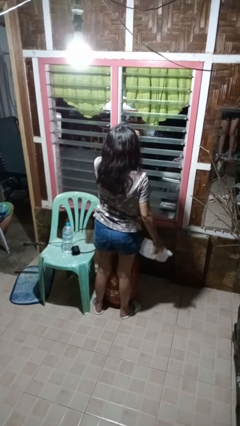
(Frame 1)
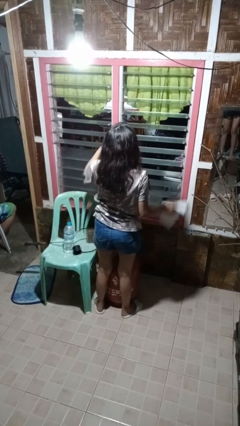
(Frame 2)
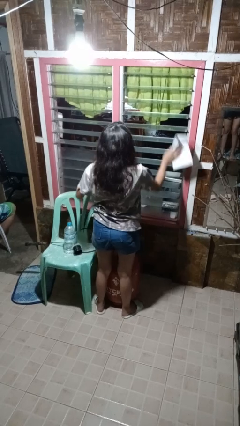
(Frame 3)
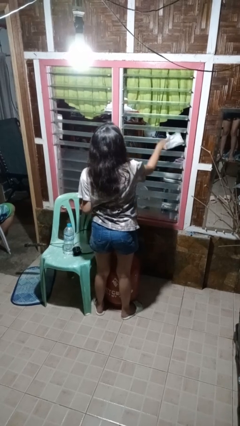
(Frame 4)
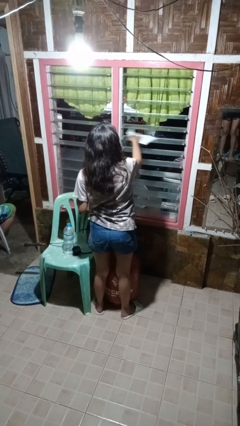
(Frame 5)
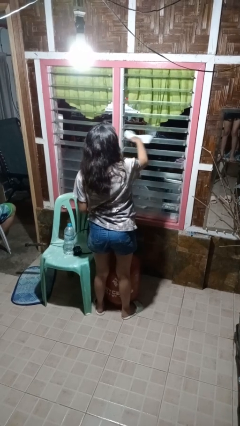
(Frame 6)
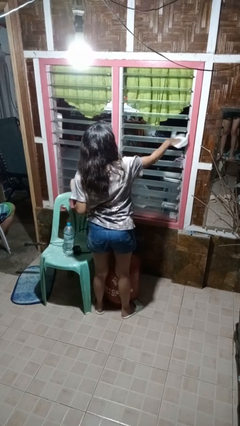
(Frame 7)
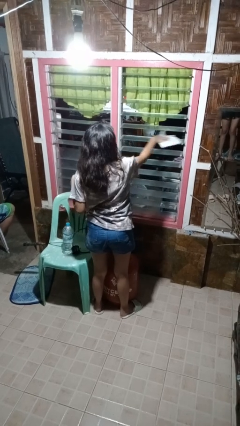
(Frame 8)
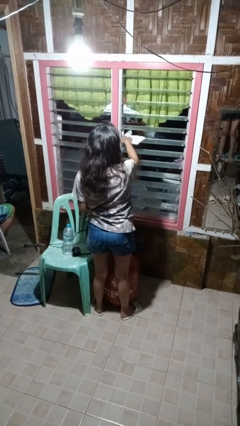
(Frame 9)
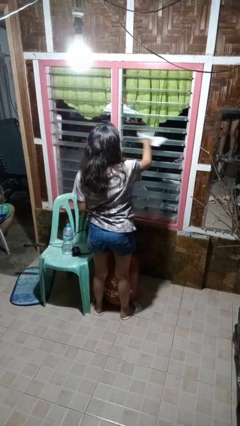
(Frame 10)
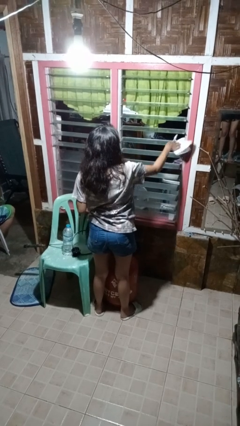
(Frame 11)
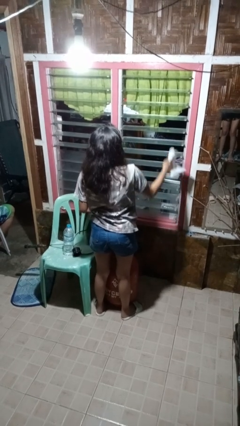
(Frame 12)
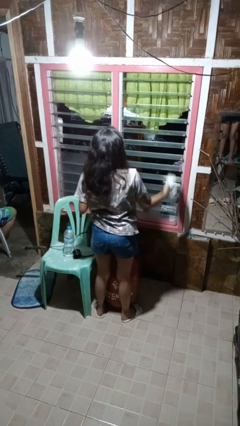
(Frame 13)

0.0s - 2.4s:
person washes window

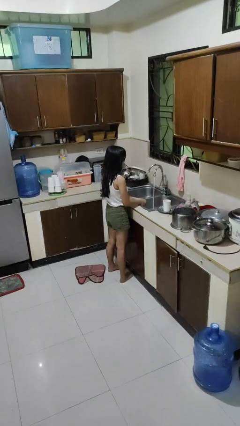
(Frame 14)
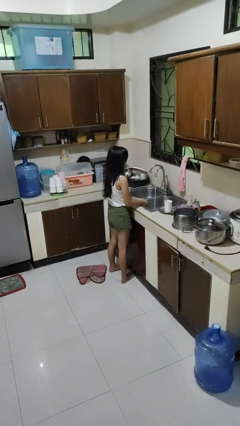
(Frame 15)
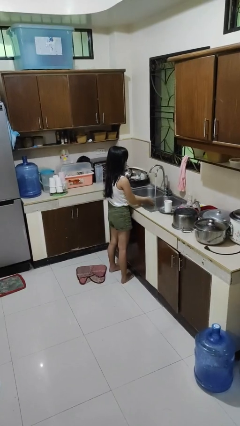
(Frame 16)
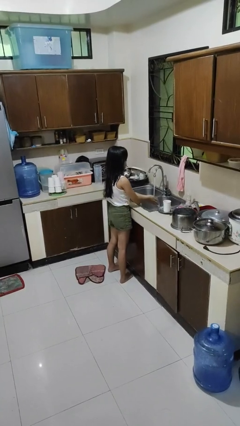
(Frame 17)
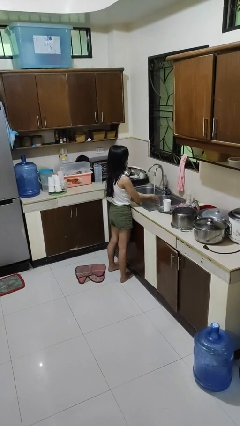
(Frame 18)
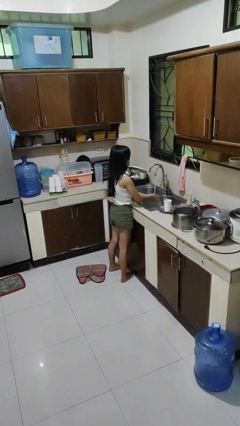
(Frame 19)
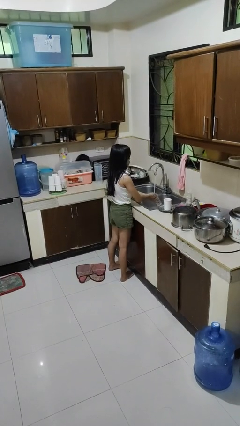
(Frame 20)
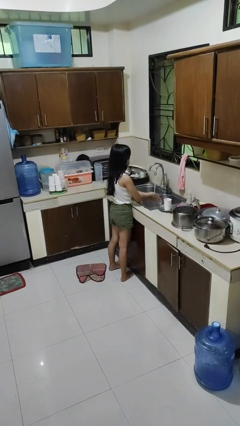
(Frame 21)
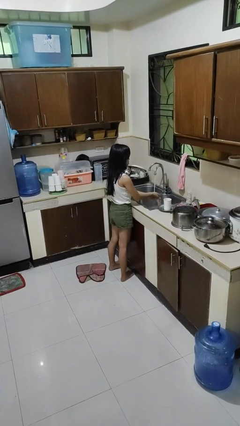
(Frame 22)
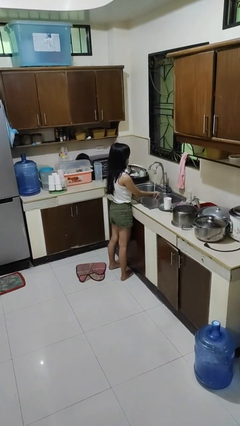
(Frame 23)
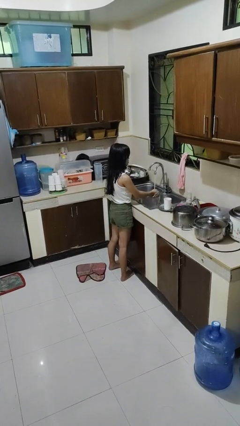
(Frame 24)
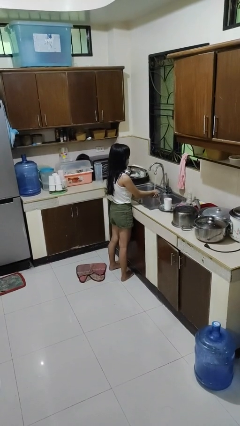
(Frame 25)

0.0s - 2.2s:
person washes hands

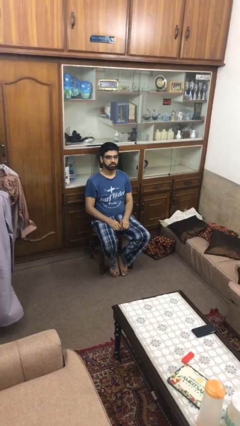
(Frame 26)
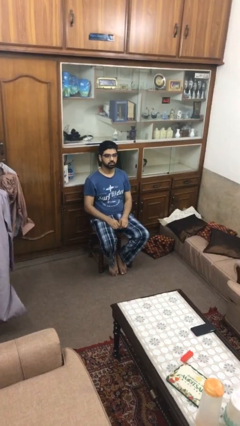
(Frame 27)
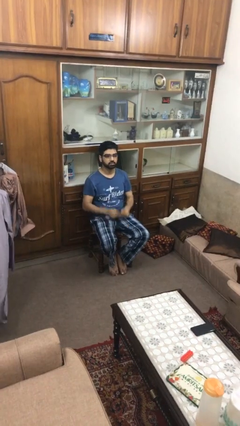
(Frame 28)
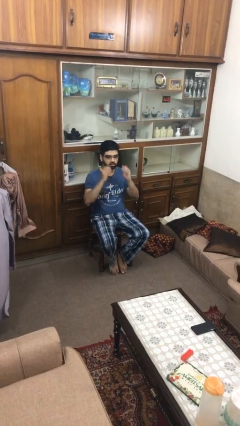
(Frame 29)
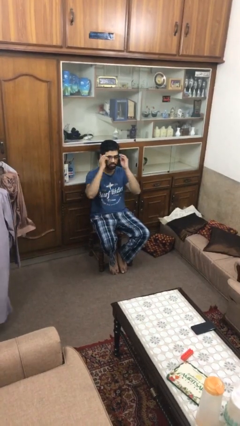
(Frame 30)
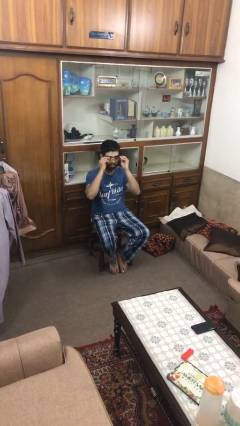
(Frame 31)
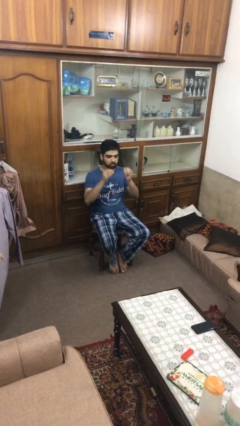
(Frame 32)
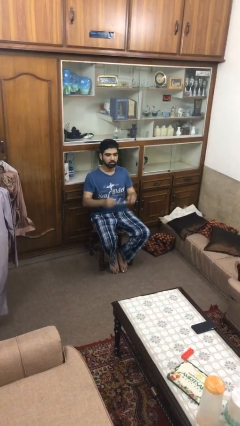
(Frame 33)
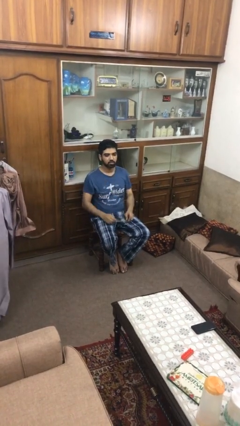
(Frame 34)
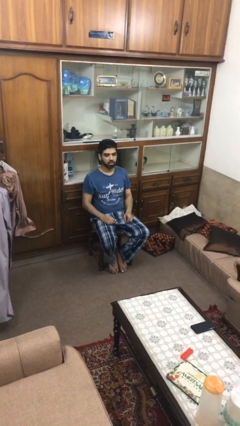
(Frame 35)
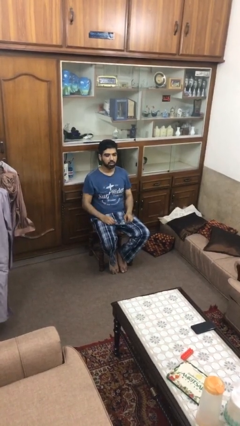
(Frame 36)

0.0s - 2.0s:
person takes off glasses

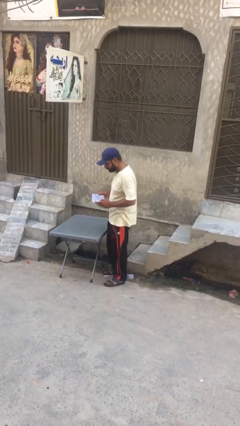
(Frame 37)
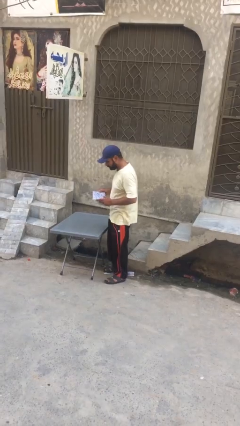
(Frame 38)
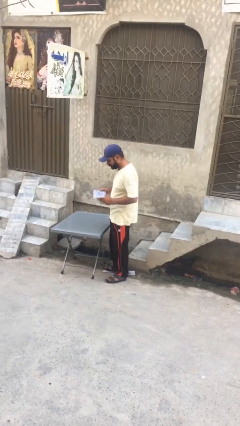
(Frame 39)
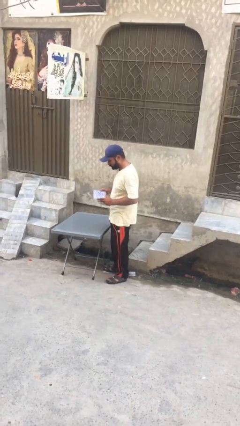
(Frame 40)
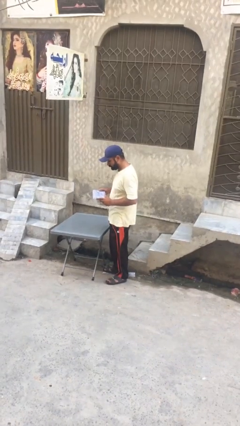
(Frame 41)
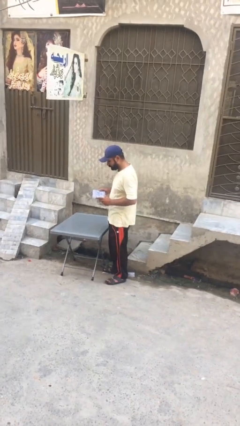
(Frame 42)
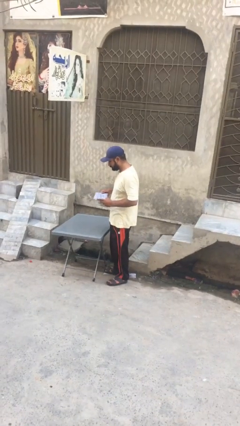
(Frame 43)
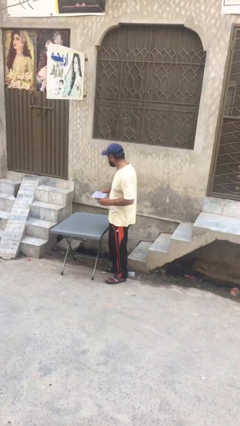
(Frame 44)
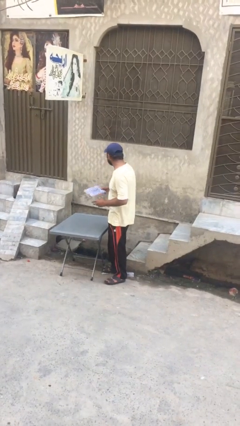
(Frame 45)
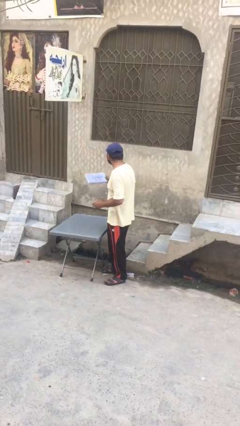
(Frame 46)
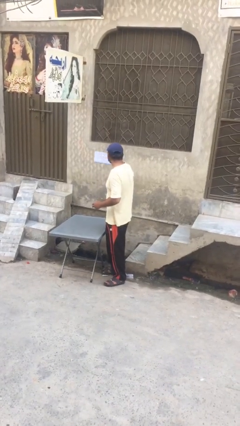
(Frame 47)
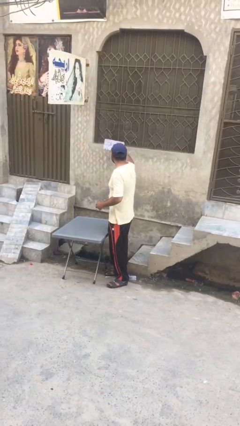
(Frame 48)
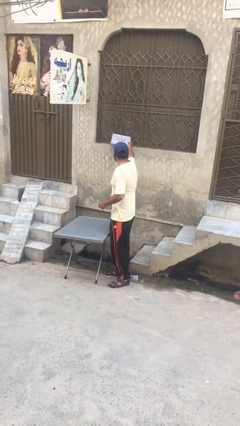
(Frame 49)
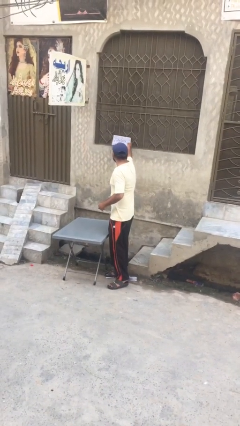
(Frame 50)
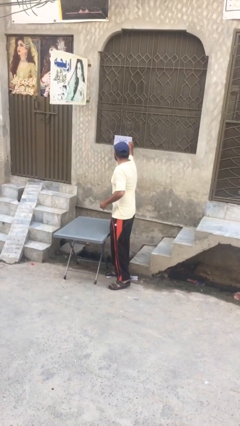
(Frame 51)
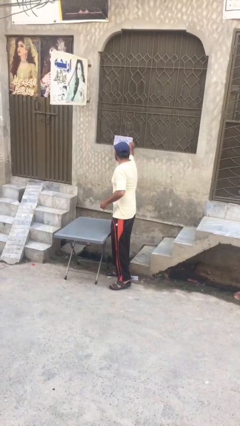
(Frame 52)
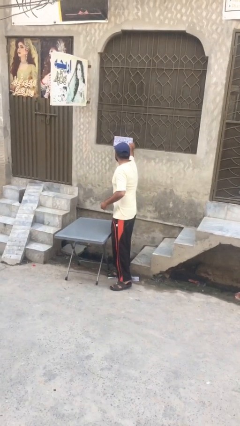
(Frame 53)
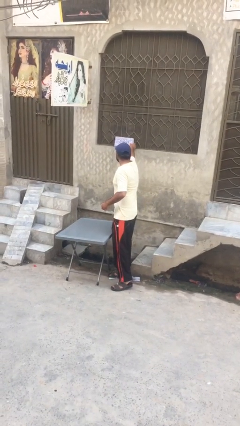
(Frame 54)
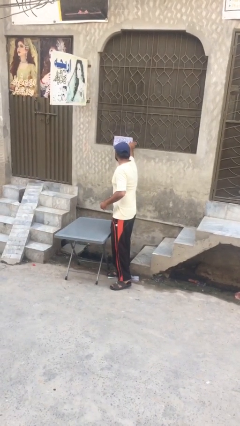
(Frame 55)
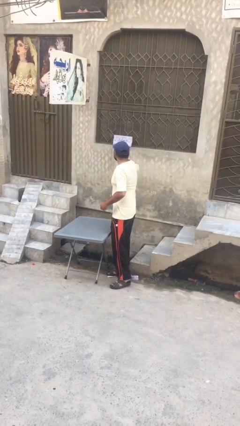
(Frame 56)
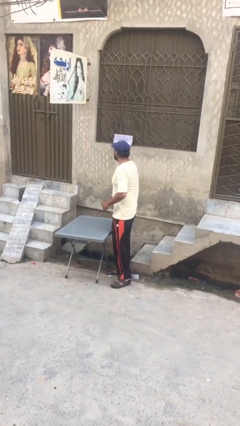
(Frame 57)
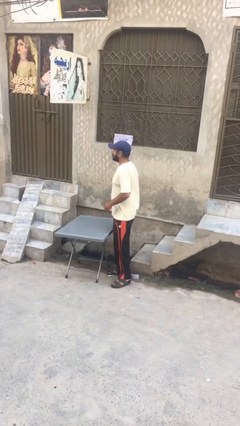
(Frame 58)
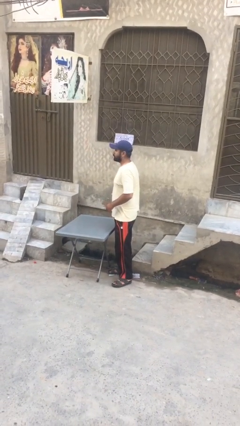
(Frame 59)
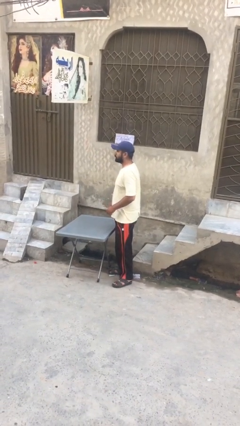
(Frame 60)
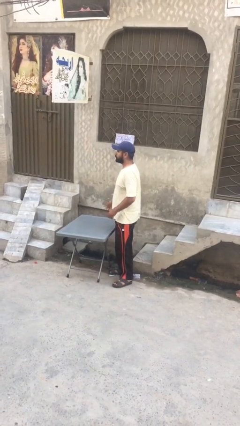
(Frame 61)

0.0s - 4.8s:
person puts down object on shelf

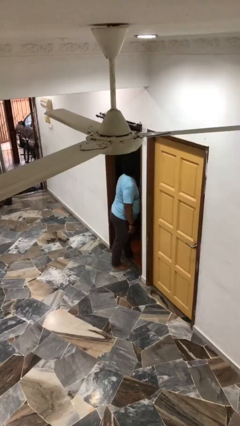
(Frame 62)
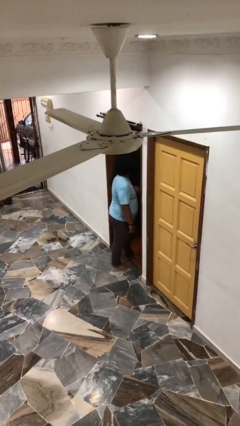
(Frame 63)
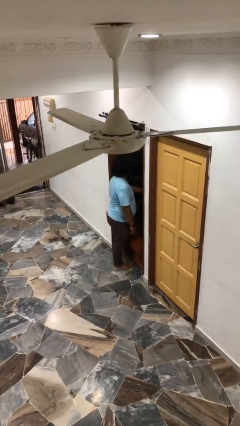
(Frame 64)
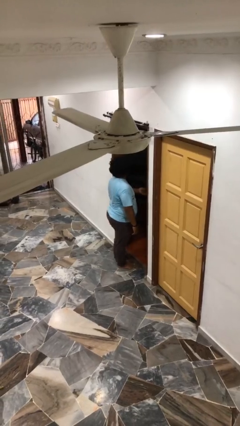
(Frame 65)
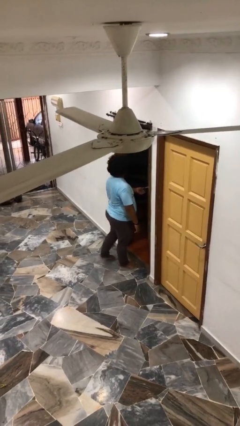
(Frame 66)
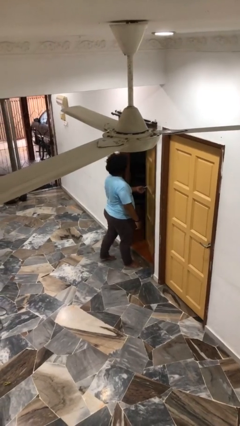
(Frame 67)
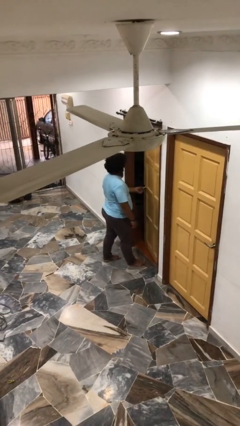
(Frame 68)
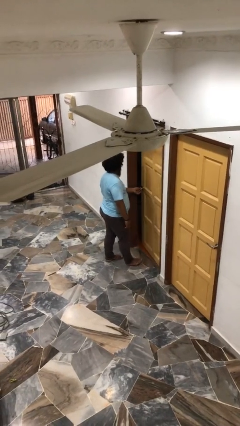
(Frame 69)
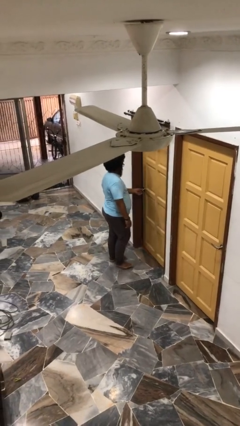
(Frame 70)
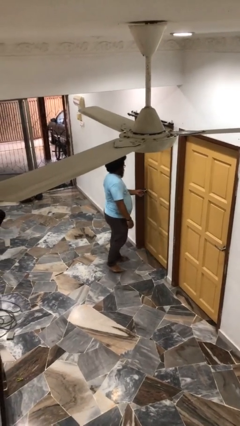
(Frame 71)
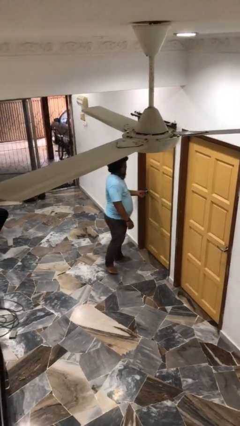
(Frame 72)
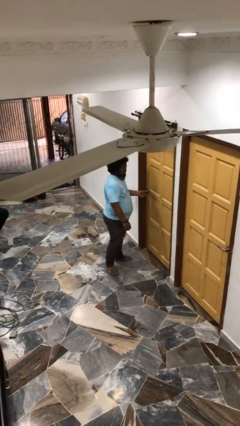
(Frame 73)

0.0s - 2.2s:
person closes facility door

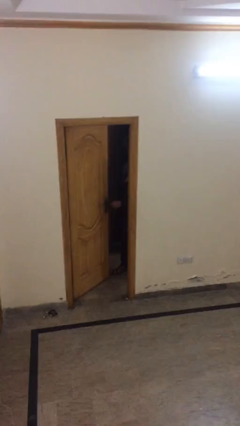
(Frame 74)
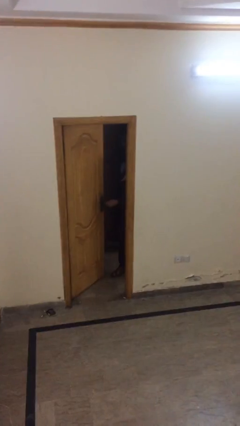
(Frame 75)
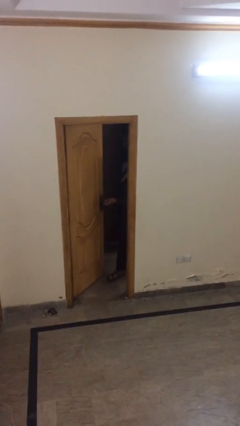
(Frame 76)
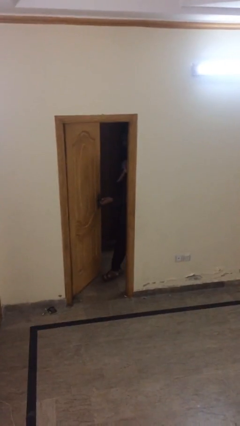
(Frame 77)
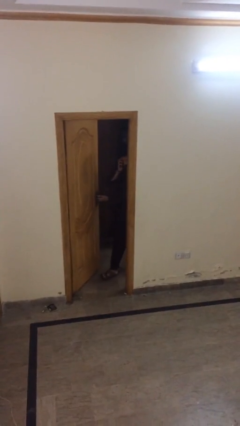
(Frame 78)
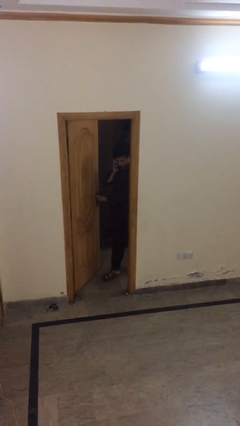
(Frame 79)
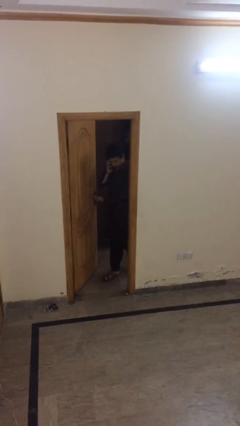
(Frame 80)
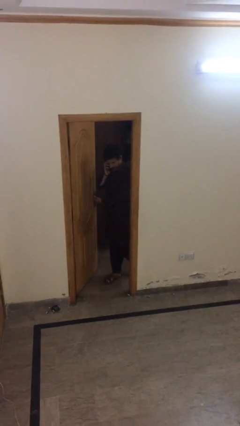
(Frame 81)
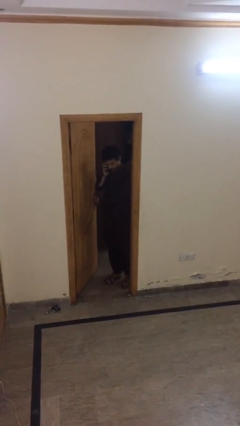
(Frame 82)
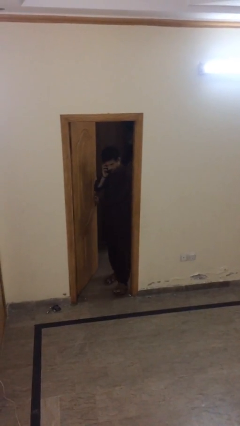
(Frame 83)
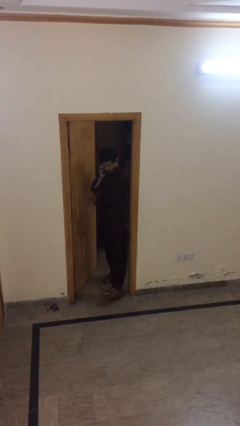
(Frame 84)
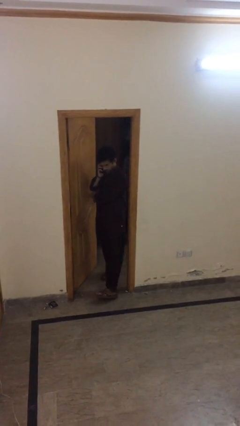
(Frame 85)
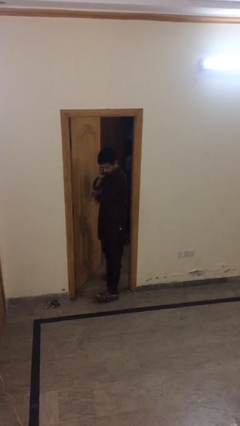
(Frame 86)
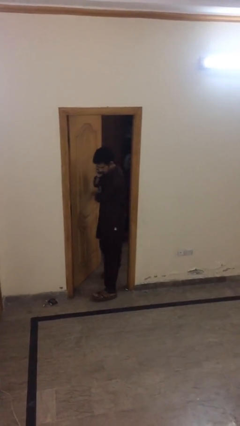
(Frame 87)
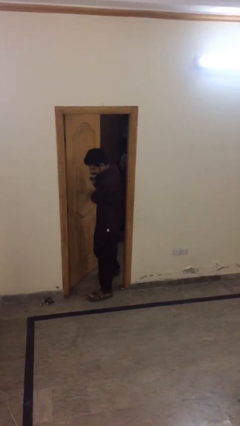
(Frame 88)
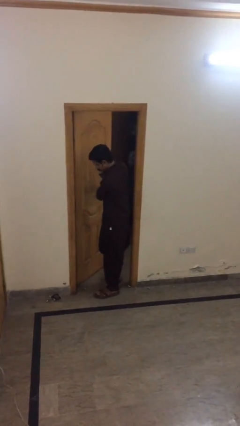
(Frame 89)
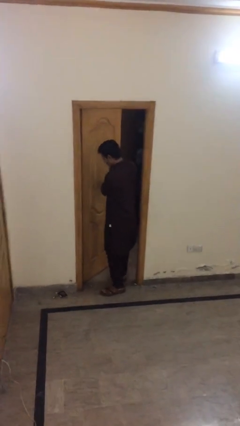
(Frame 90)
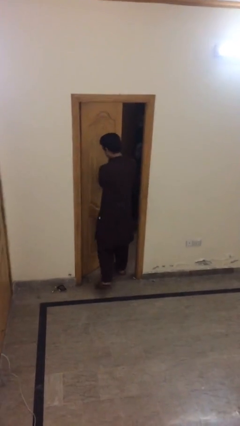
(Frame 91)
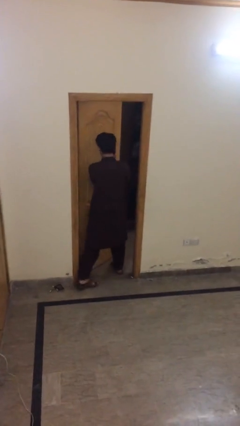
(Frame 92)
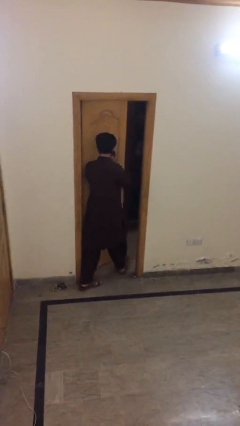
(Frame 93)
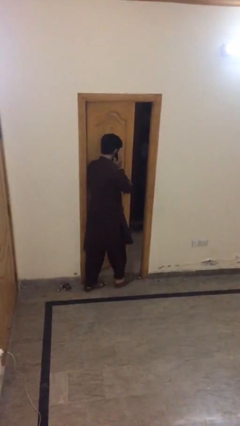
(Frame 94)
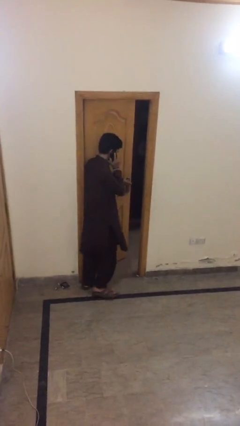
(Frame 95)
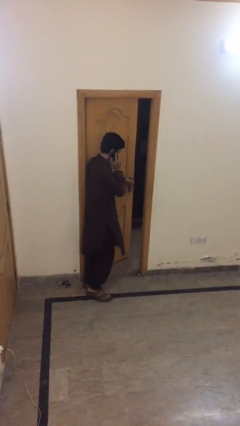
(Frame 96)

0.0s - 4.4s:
person enters scene through structure
